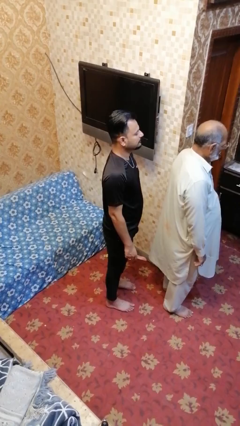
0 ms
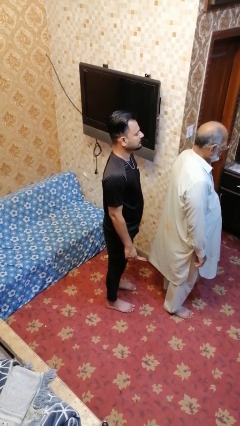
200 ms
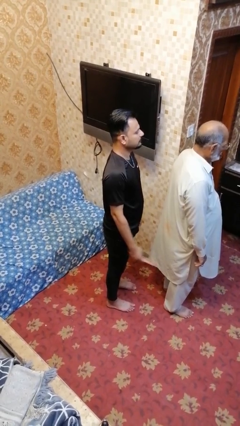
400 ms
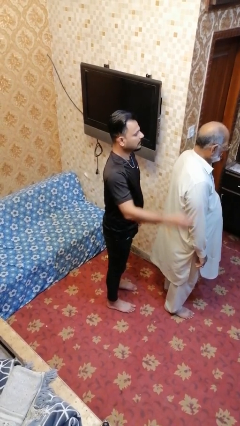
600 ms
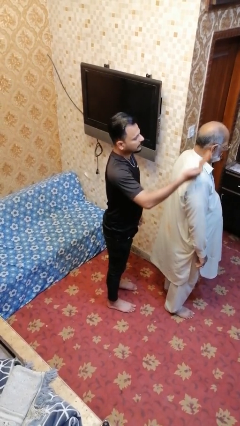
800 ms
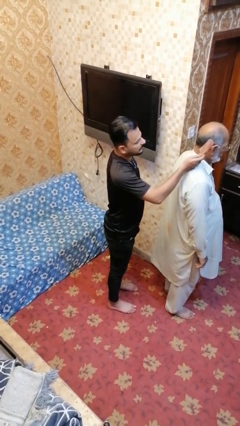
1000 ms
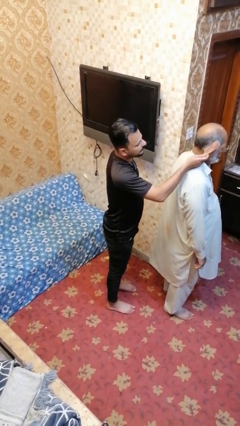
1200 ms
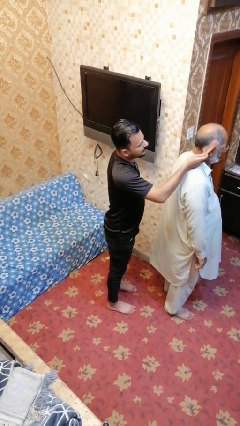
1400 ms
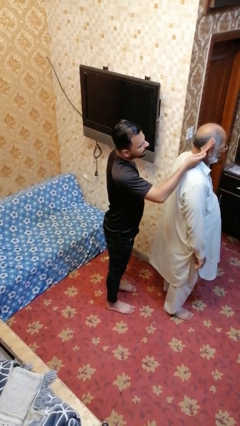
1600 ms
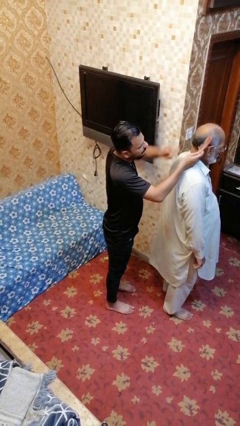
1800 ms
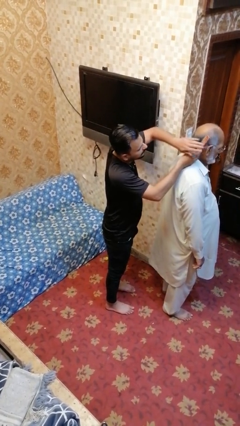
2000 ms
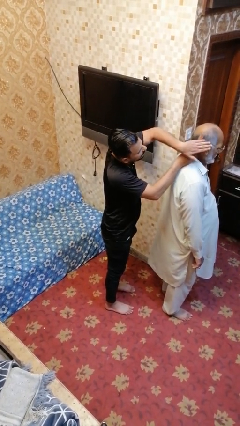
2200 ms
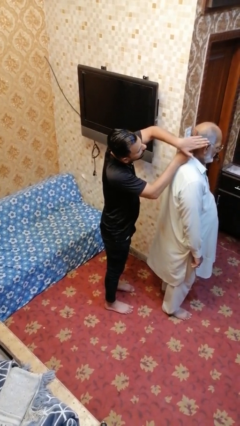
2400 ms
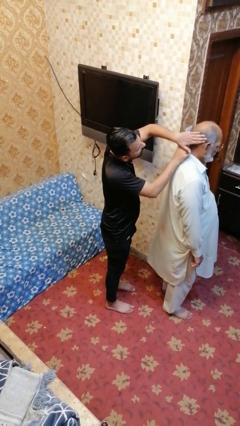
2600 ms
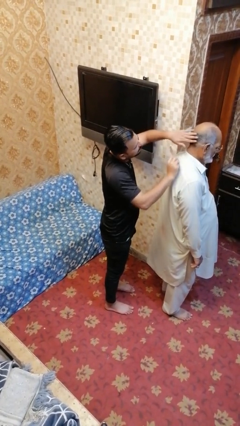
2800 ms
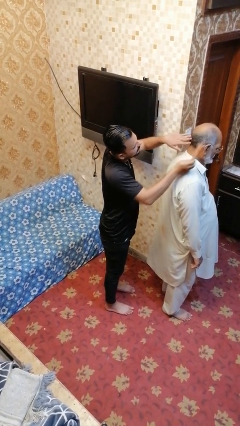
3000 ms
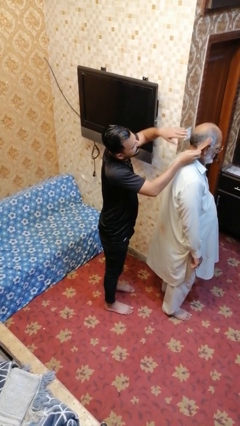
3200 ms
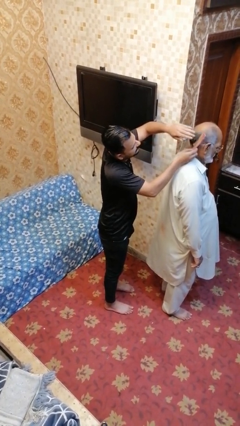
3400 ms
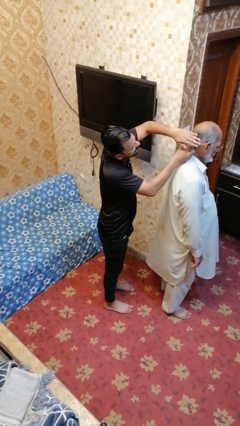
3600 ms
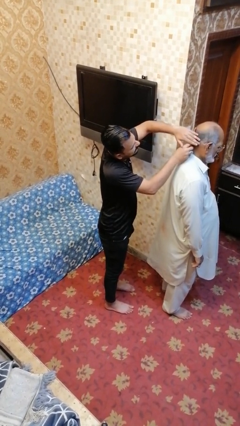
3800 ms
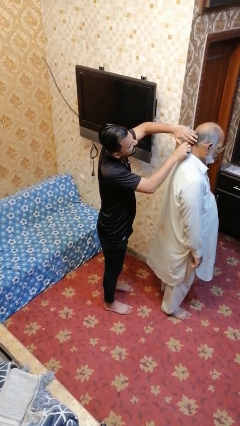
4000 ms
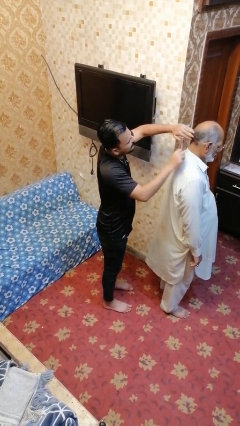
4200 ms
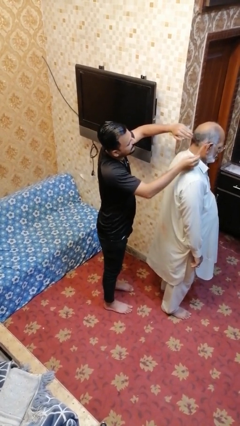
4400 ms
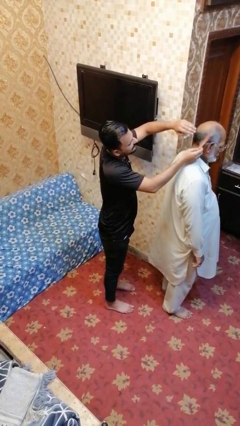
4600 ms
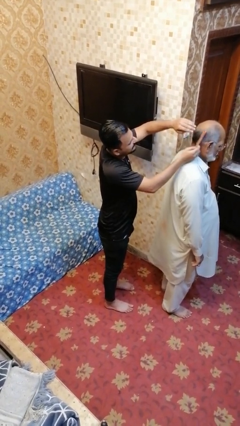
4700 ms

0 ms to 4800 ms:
person brushes hair of person

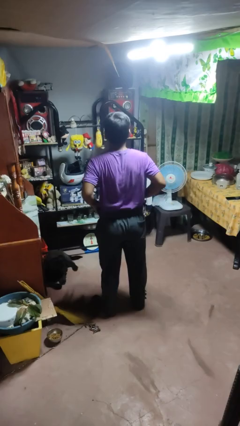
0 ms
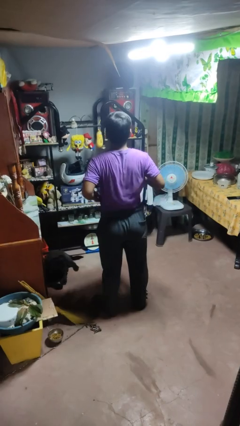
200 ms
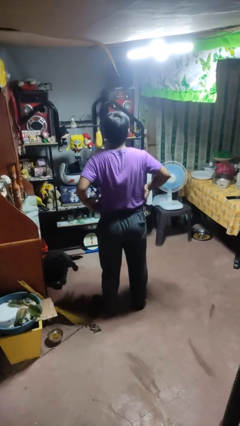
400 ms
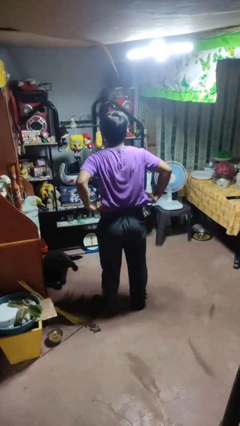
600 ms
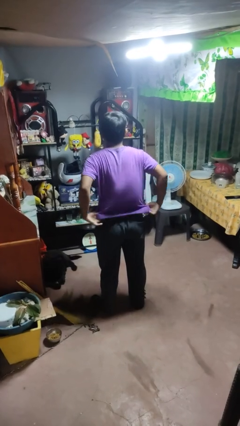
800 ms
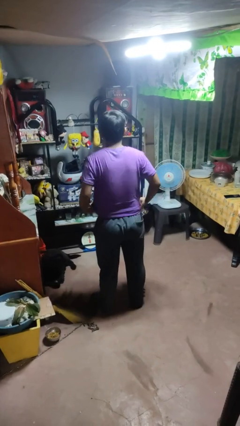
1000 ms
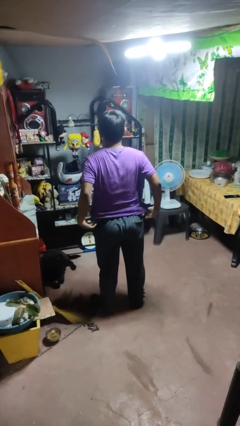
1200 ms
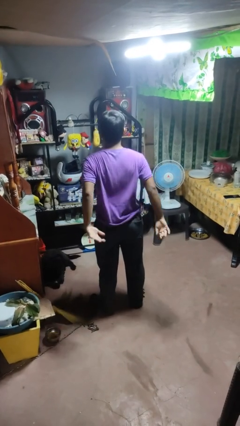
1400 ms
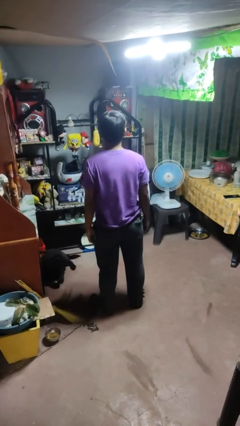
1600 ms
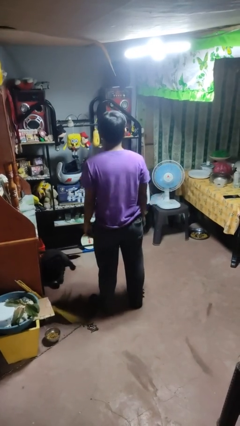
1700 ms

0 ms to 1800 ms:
person untucks shirt

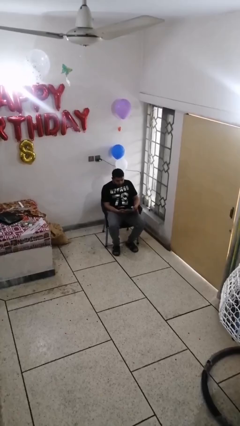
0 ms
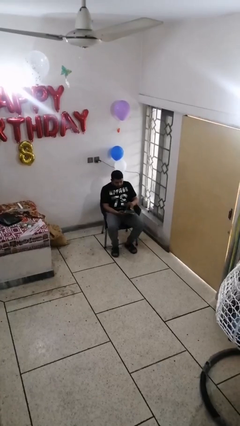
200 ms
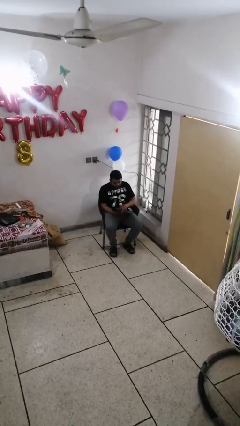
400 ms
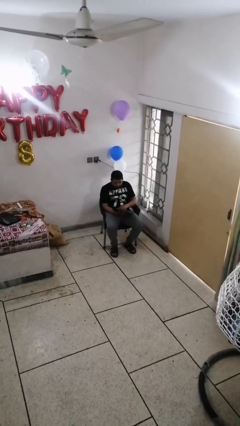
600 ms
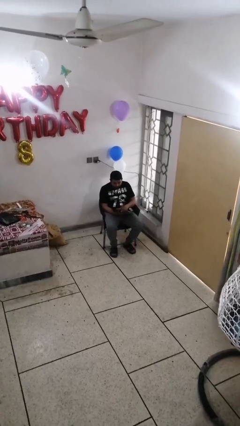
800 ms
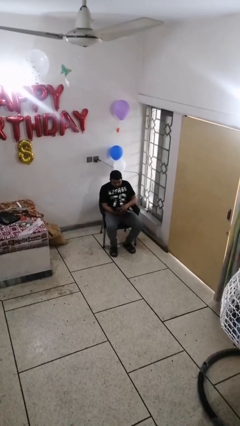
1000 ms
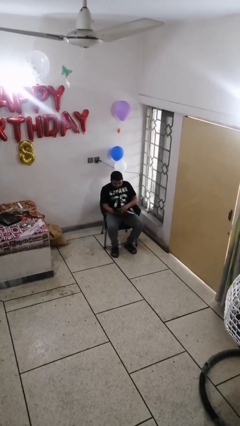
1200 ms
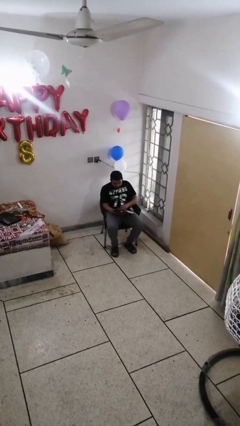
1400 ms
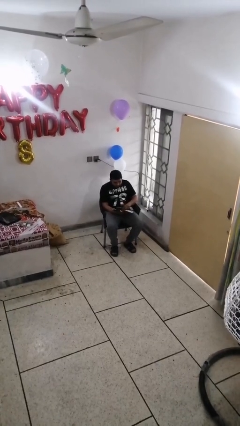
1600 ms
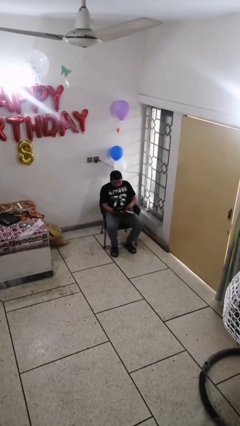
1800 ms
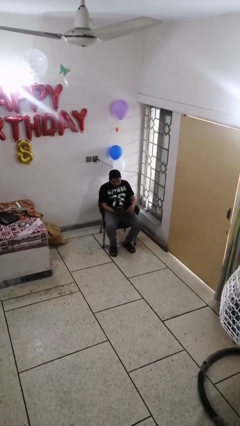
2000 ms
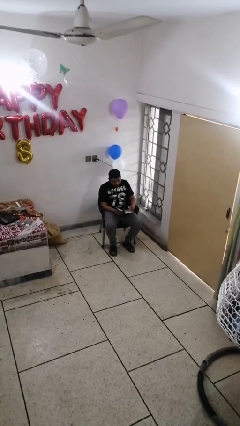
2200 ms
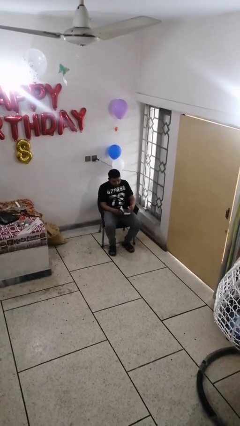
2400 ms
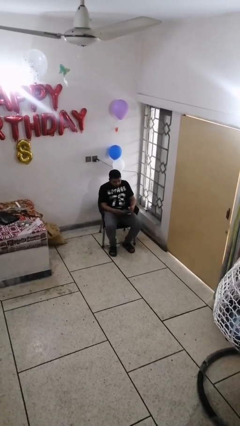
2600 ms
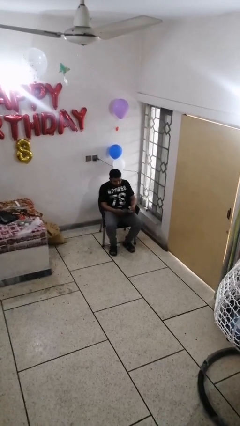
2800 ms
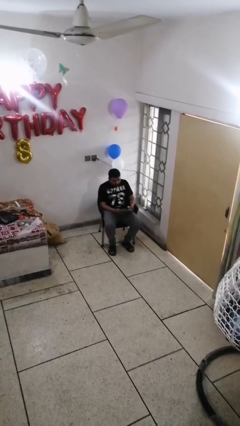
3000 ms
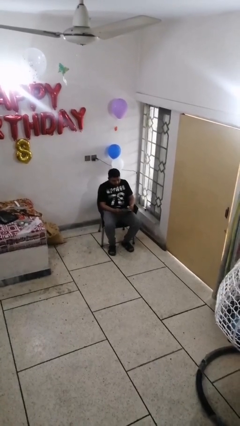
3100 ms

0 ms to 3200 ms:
person reads document

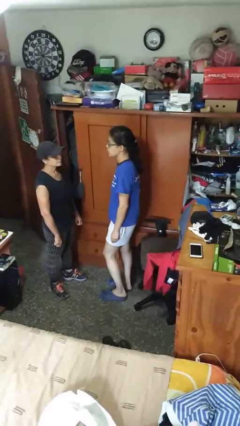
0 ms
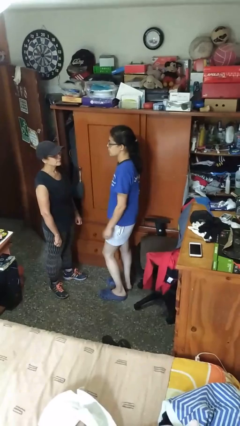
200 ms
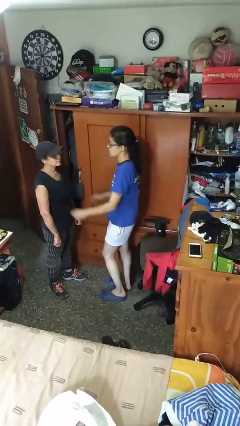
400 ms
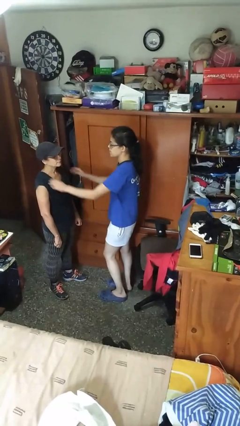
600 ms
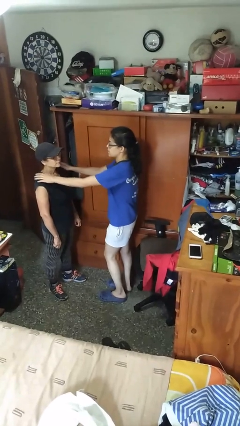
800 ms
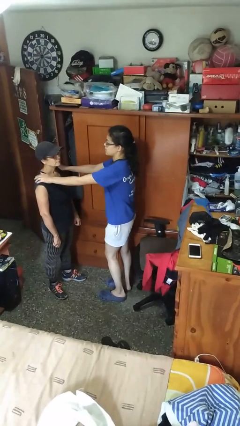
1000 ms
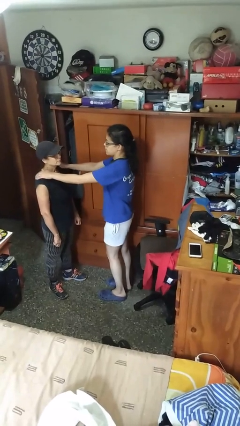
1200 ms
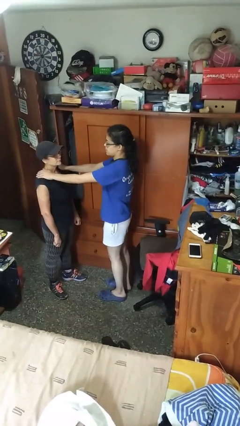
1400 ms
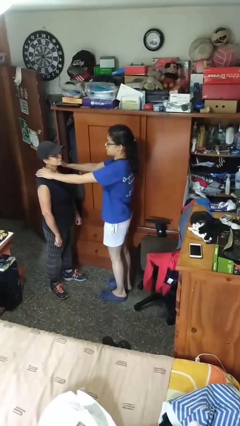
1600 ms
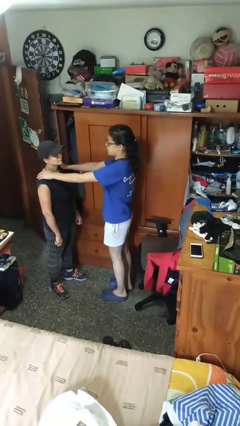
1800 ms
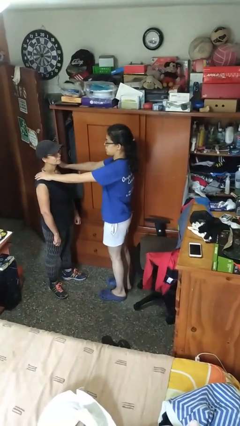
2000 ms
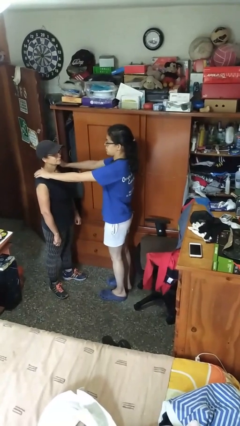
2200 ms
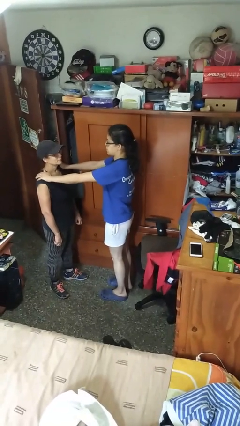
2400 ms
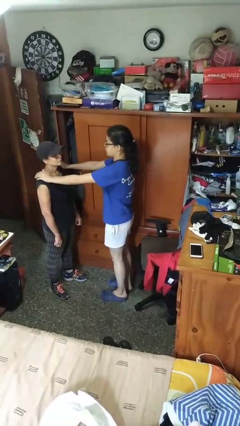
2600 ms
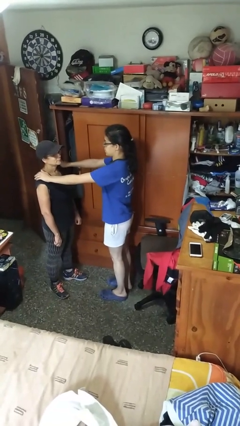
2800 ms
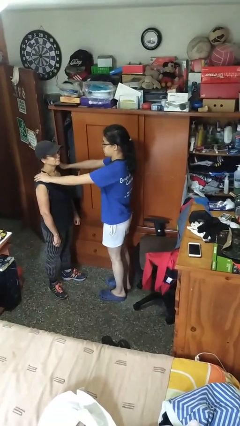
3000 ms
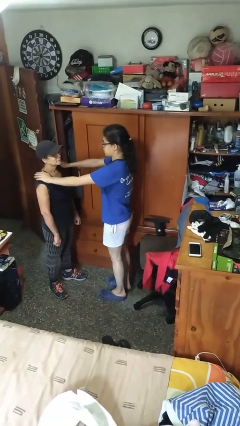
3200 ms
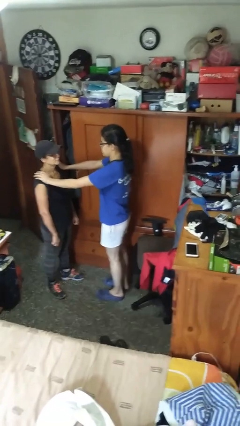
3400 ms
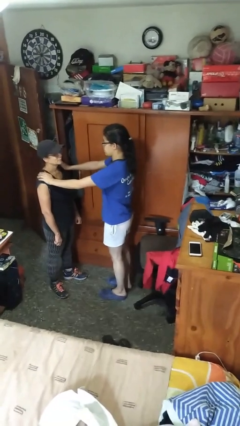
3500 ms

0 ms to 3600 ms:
person pounds shoulders of person

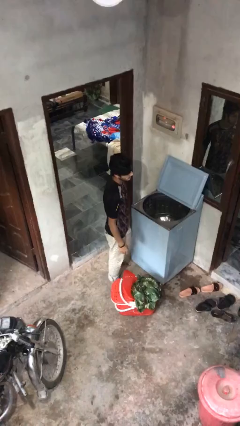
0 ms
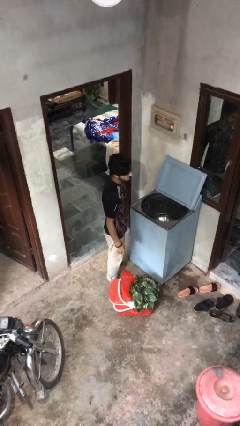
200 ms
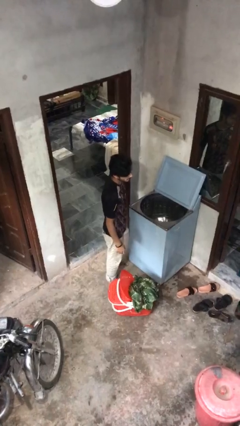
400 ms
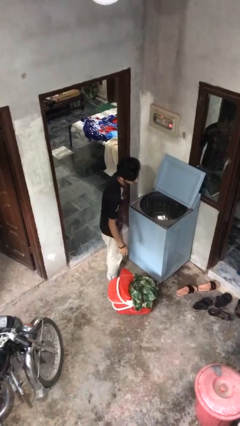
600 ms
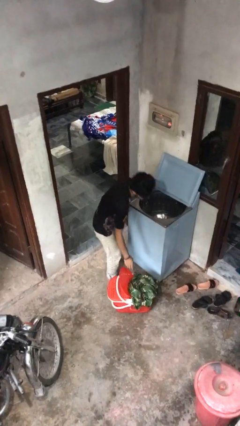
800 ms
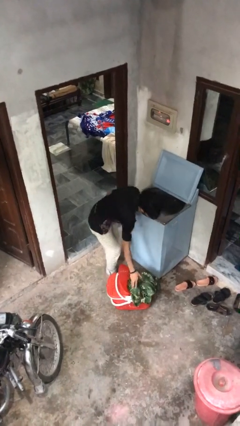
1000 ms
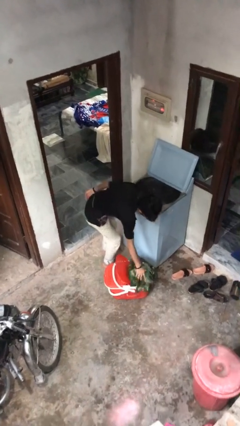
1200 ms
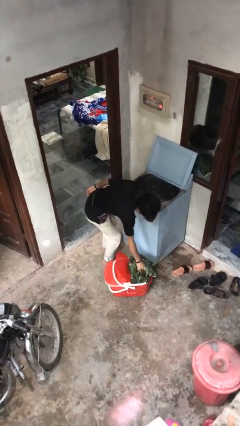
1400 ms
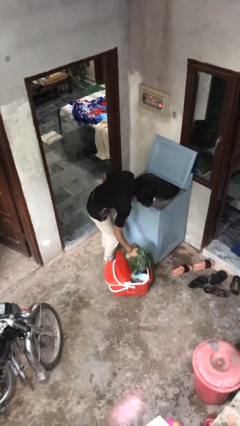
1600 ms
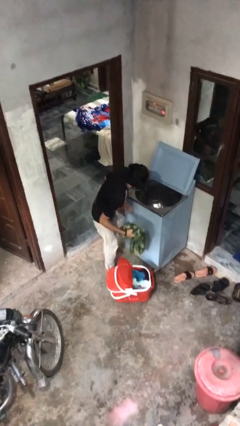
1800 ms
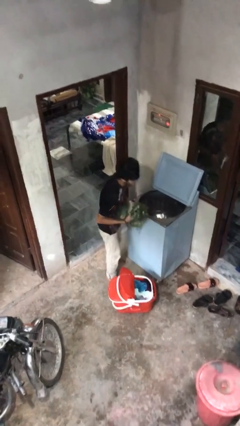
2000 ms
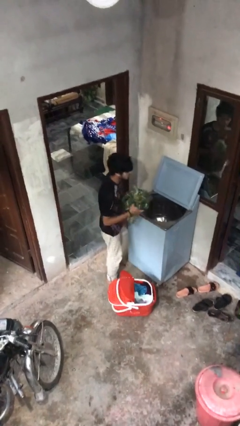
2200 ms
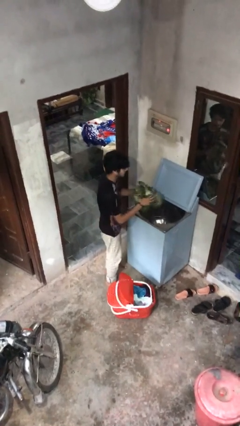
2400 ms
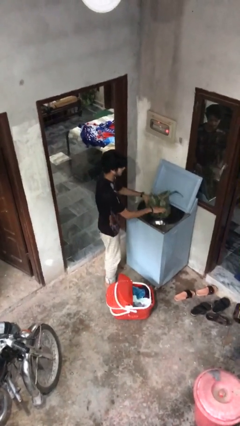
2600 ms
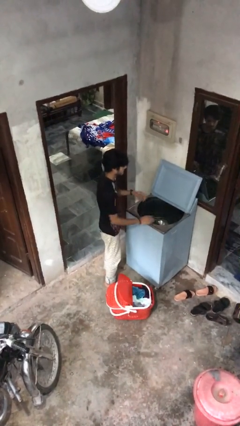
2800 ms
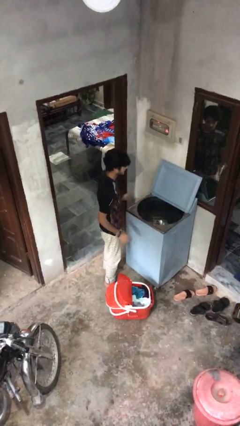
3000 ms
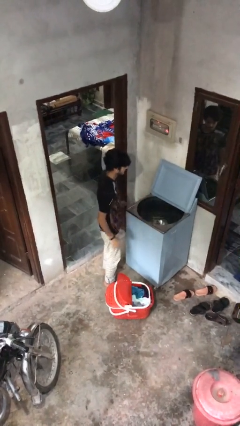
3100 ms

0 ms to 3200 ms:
person loads clotheswasher

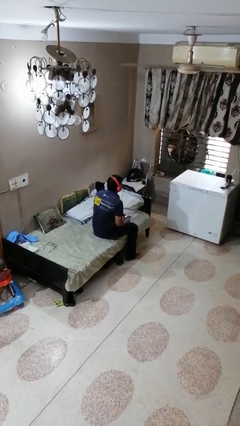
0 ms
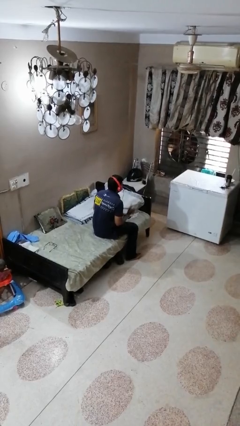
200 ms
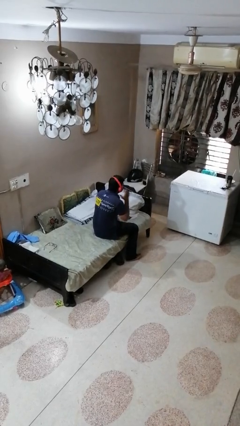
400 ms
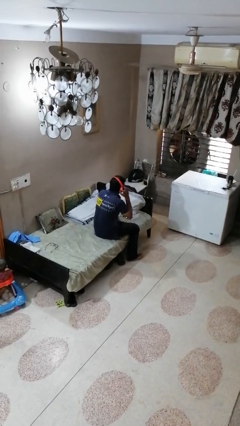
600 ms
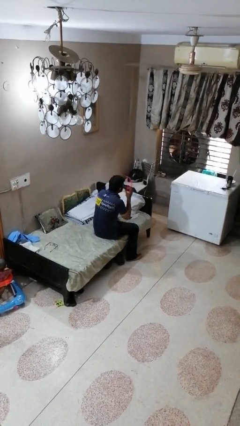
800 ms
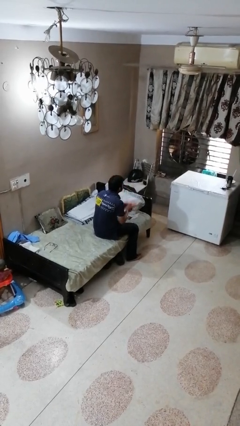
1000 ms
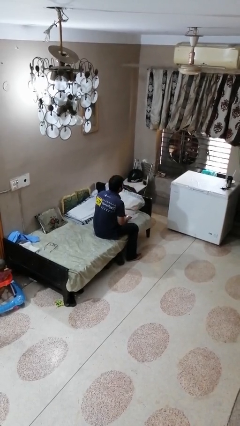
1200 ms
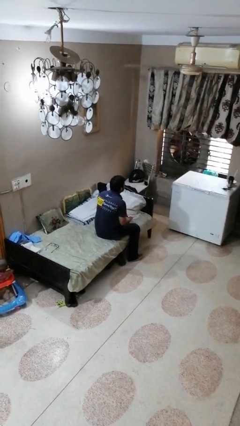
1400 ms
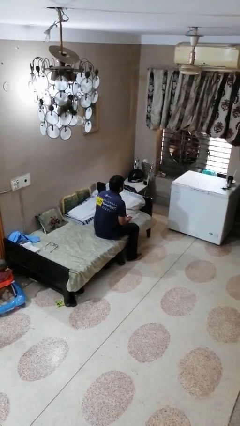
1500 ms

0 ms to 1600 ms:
person takes off headphones
